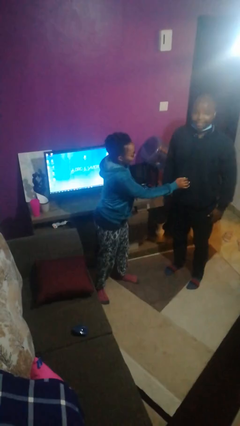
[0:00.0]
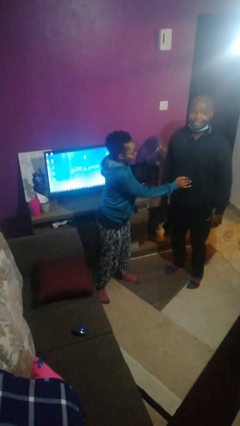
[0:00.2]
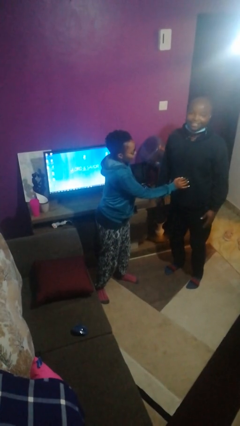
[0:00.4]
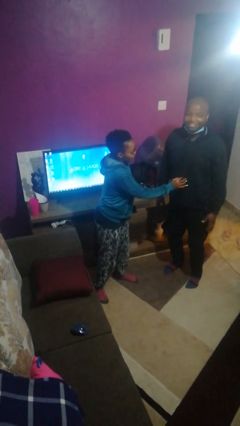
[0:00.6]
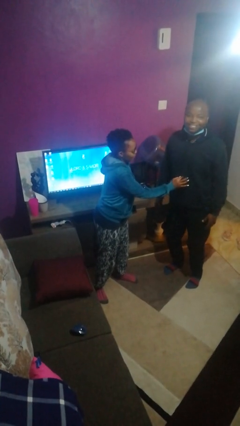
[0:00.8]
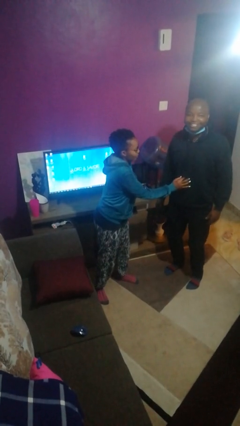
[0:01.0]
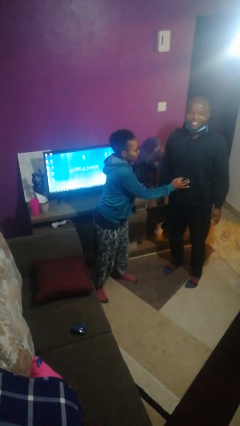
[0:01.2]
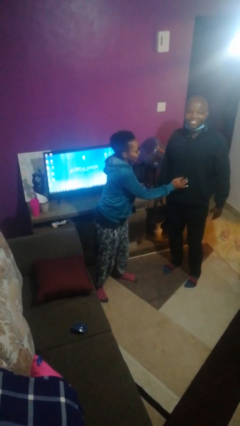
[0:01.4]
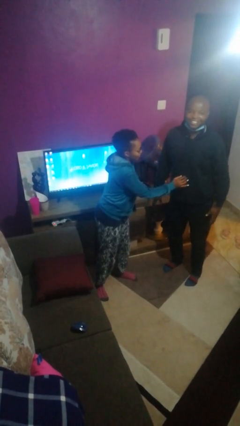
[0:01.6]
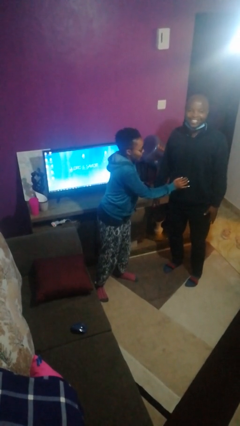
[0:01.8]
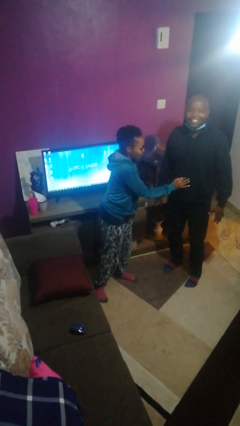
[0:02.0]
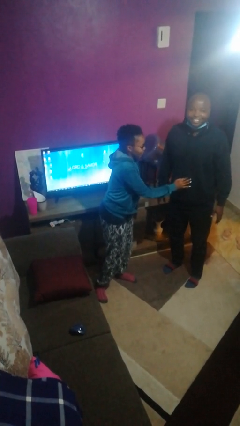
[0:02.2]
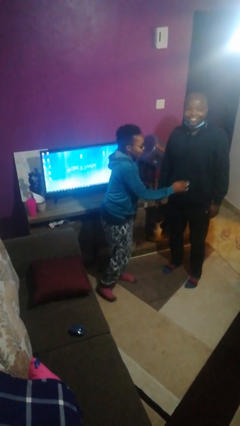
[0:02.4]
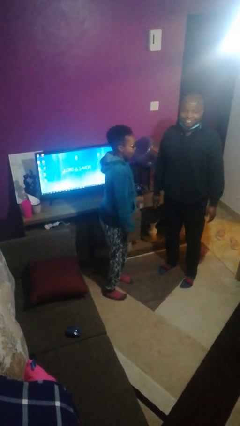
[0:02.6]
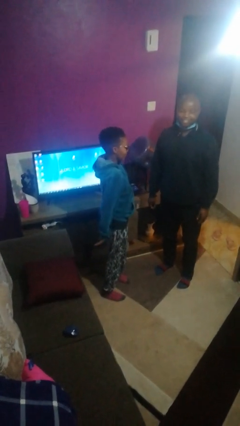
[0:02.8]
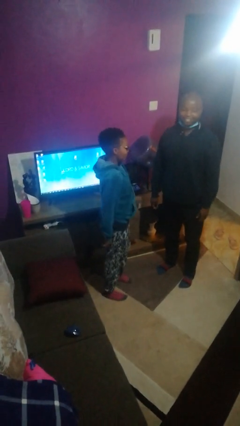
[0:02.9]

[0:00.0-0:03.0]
person tickles person

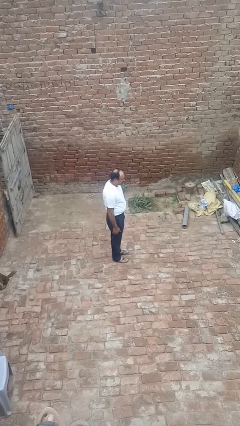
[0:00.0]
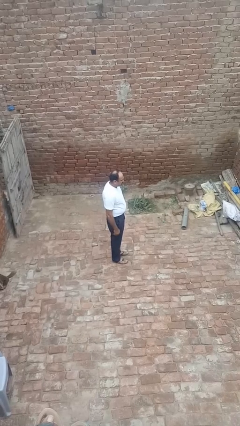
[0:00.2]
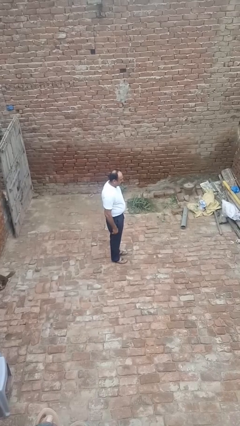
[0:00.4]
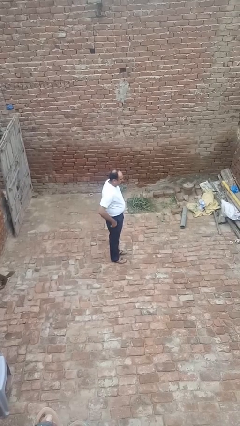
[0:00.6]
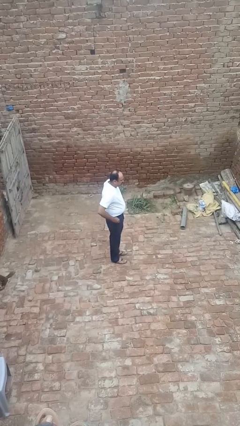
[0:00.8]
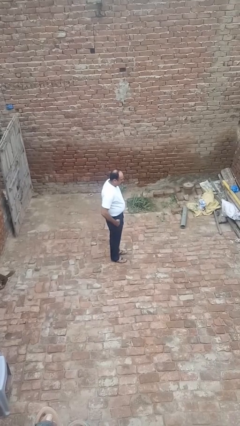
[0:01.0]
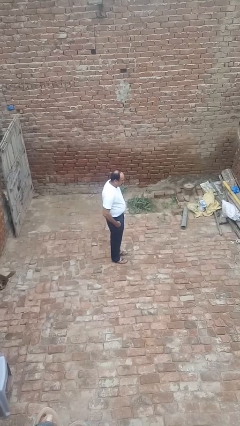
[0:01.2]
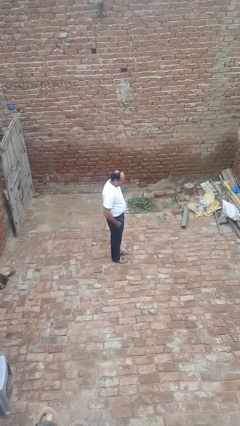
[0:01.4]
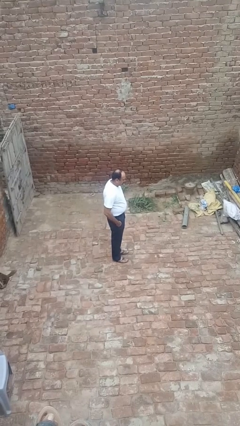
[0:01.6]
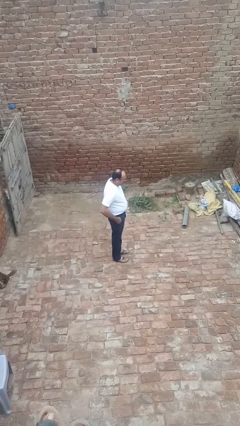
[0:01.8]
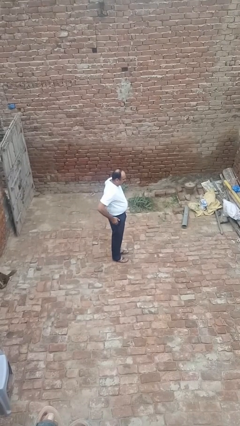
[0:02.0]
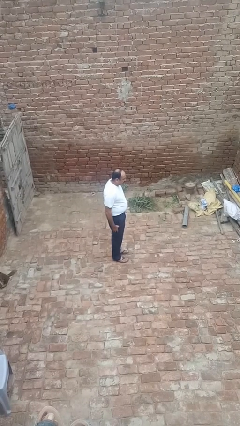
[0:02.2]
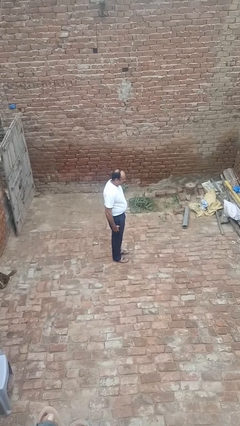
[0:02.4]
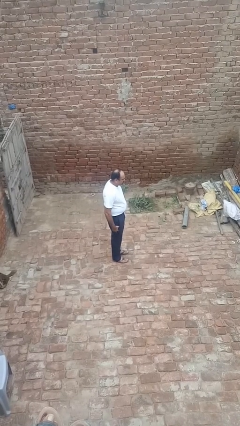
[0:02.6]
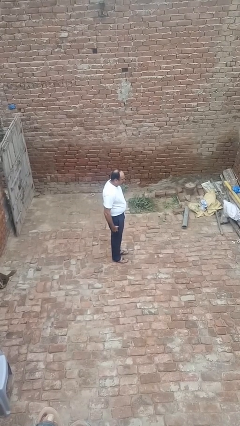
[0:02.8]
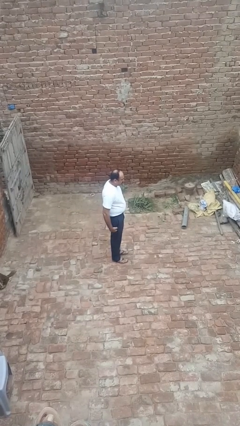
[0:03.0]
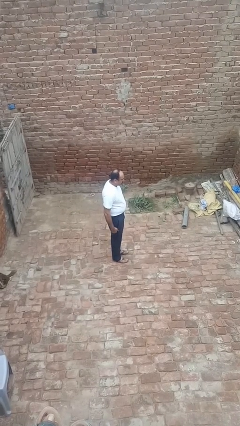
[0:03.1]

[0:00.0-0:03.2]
person puts hands in back pockets

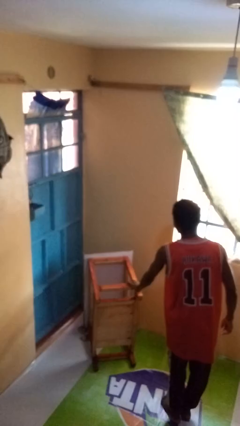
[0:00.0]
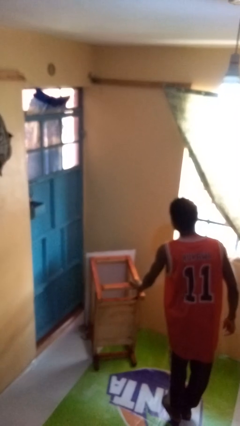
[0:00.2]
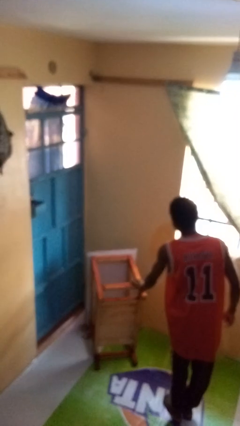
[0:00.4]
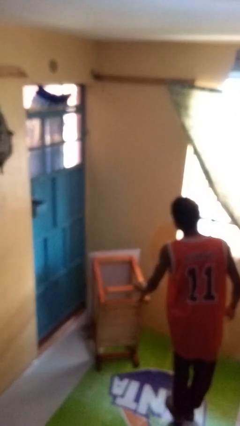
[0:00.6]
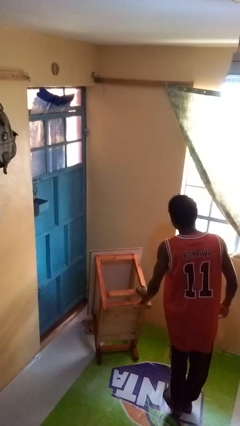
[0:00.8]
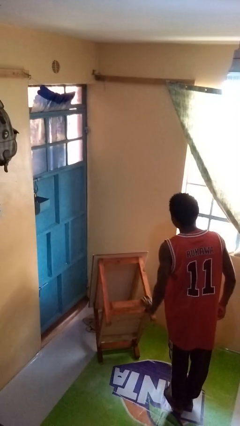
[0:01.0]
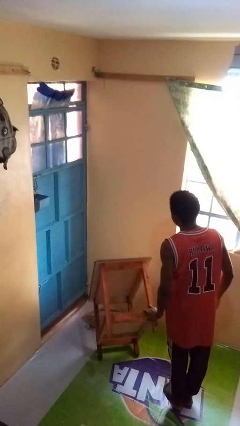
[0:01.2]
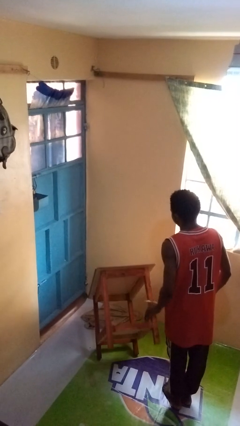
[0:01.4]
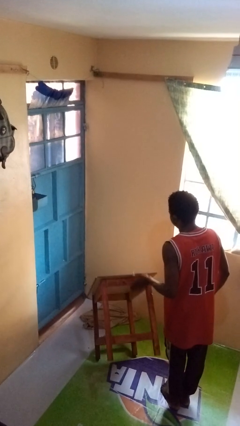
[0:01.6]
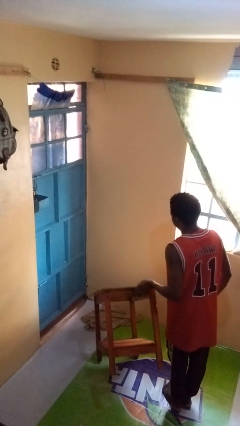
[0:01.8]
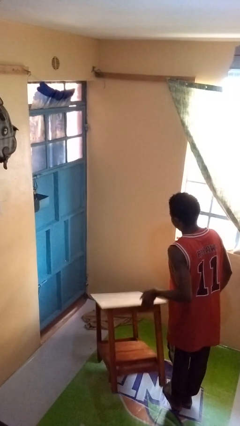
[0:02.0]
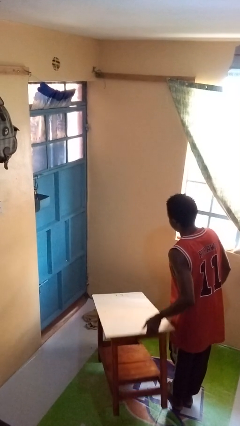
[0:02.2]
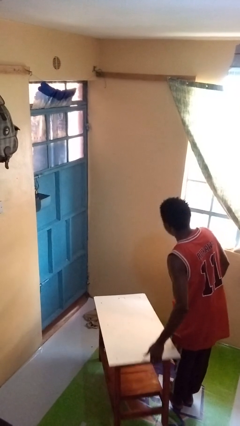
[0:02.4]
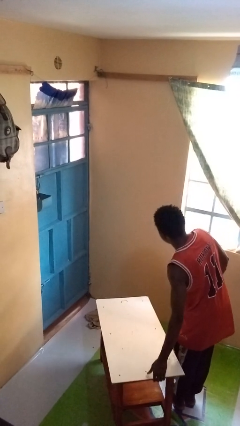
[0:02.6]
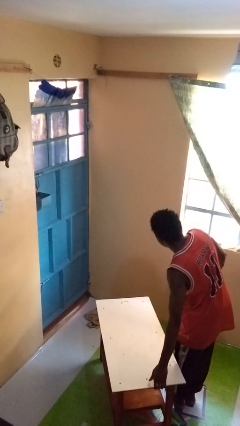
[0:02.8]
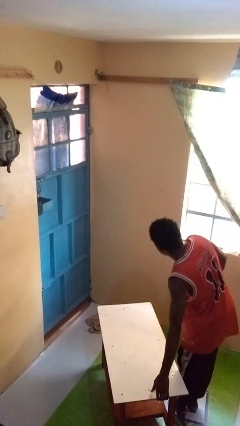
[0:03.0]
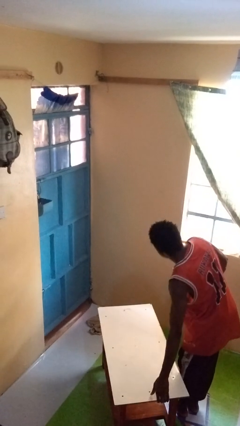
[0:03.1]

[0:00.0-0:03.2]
person sets upright furniture

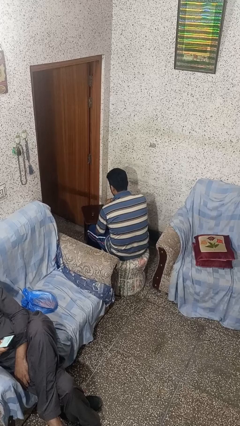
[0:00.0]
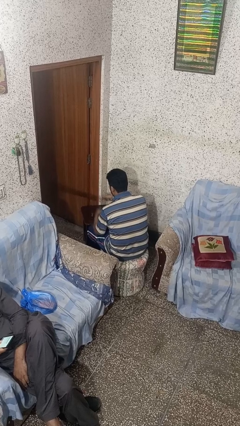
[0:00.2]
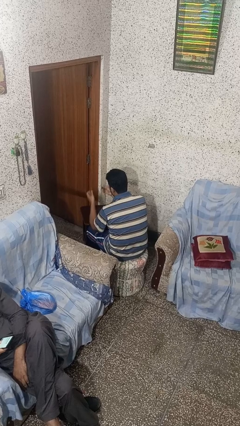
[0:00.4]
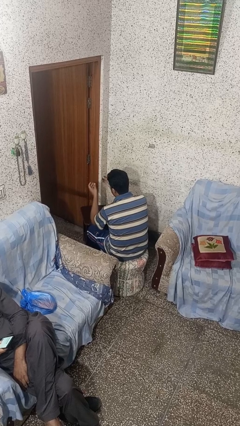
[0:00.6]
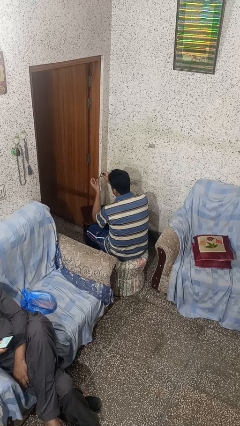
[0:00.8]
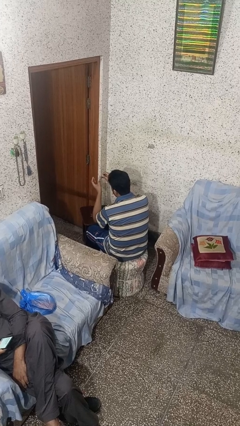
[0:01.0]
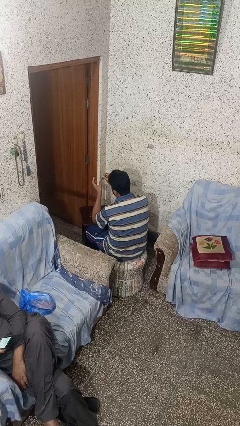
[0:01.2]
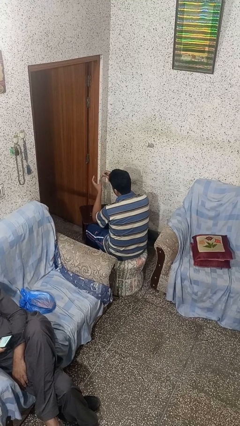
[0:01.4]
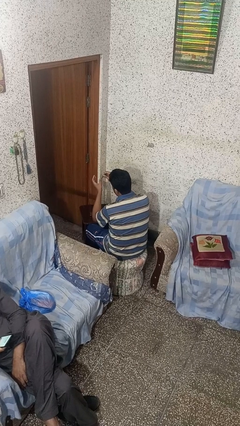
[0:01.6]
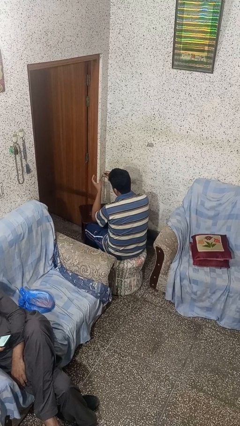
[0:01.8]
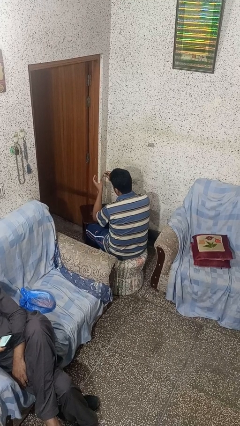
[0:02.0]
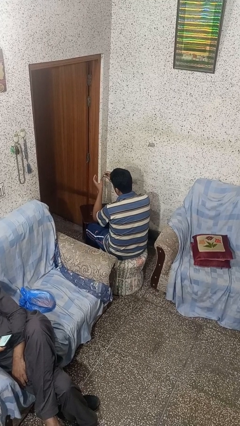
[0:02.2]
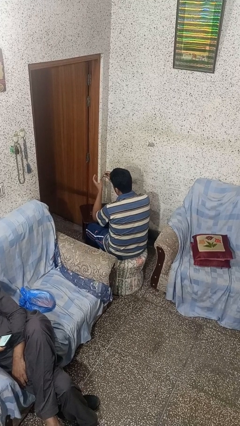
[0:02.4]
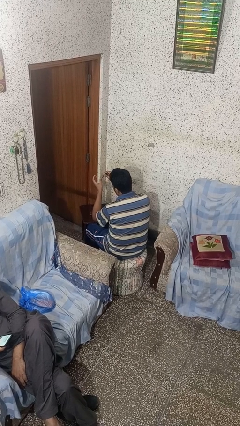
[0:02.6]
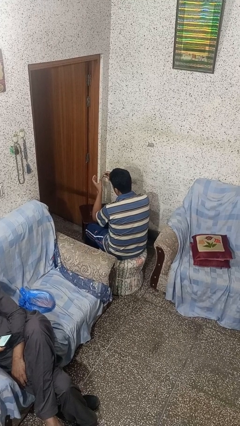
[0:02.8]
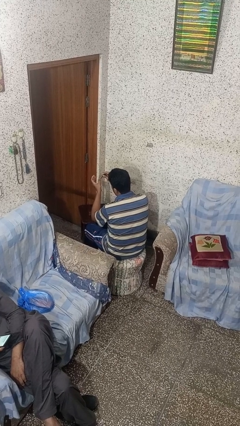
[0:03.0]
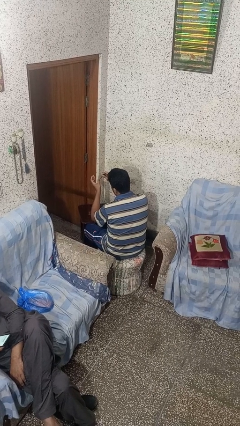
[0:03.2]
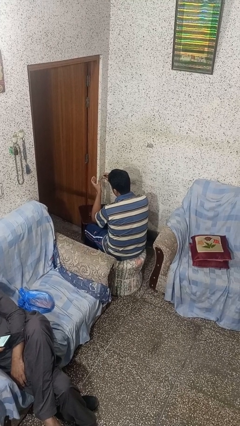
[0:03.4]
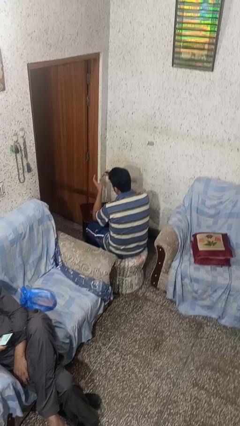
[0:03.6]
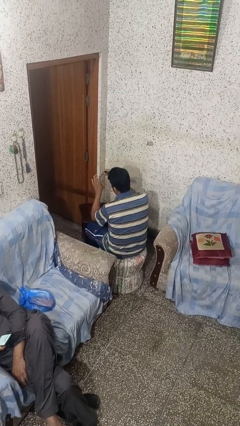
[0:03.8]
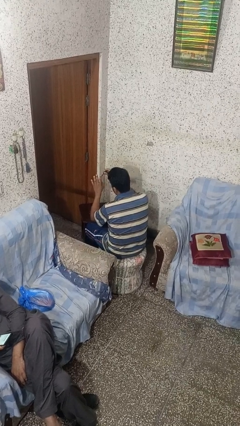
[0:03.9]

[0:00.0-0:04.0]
person paints fingernails

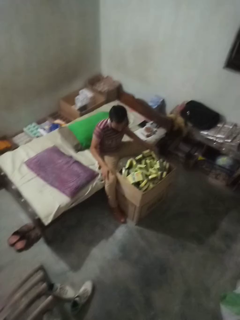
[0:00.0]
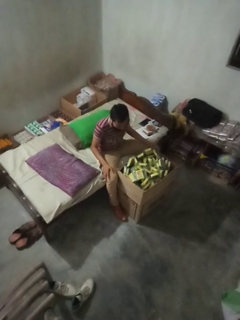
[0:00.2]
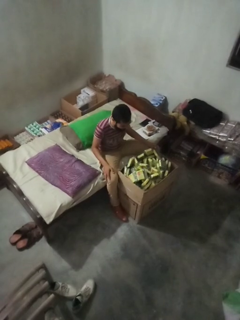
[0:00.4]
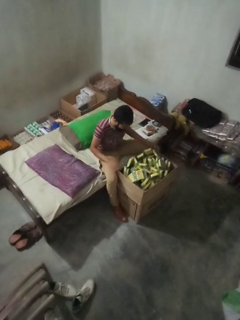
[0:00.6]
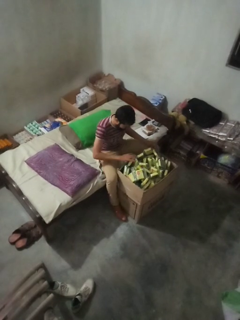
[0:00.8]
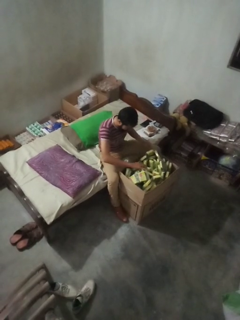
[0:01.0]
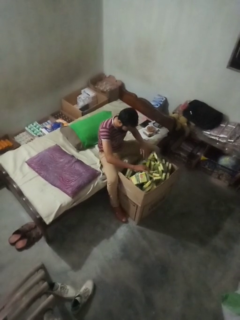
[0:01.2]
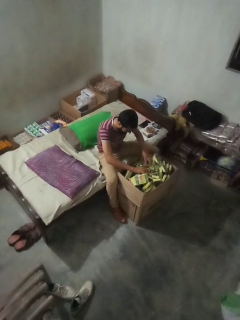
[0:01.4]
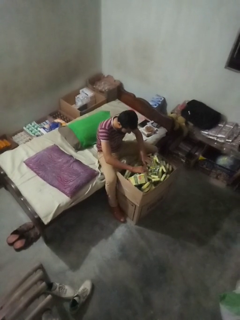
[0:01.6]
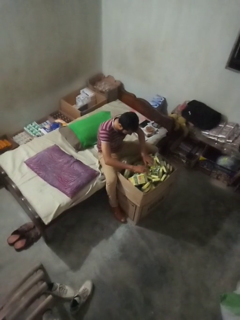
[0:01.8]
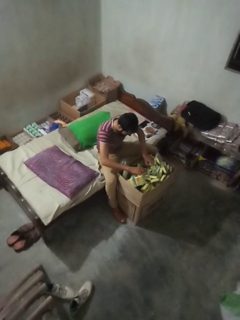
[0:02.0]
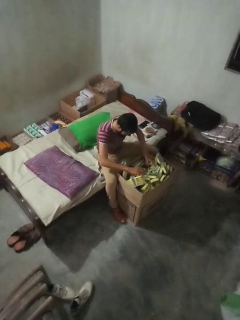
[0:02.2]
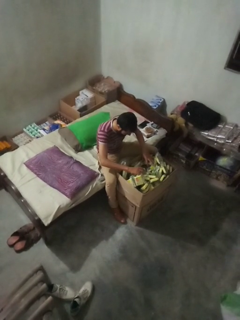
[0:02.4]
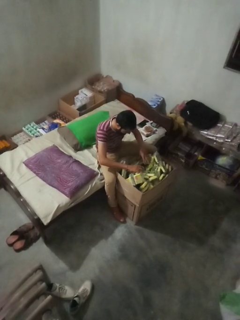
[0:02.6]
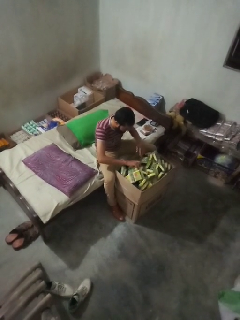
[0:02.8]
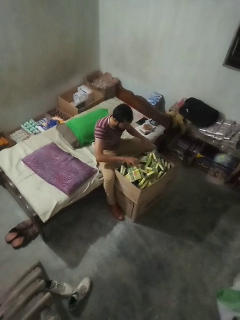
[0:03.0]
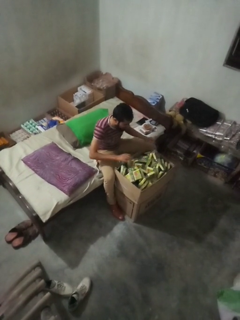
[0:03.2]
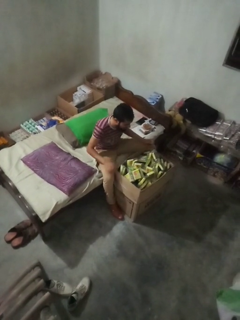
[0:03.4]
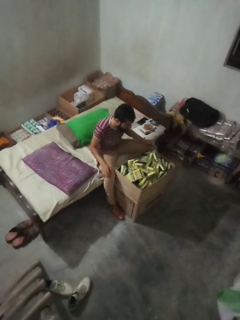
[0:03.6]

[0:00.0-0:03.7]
person searches in box

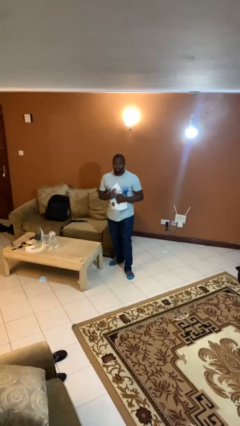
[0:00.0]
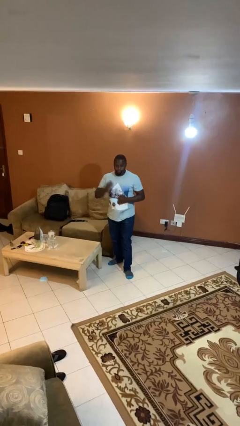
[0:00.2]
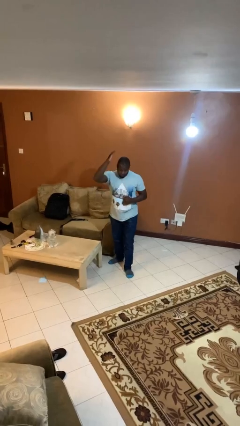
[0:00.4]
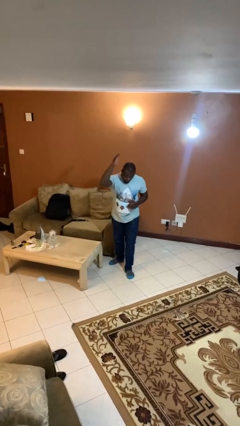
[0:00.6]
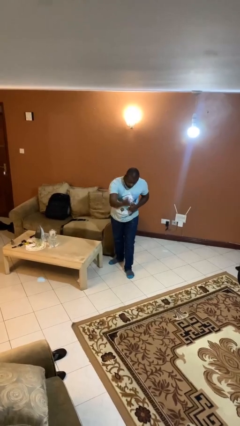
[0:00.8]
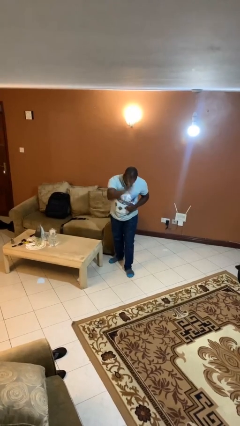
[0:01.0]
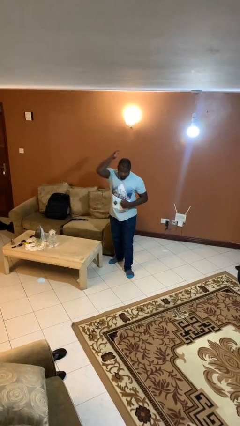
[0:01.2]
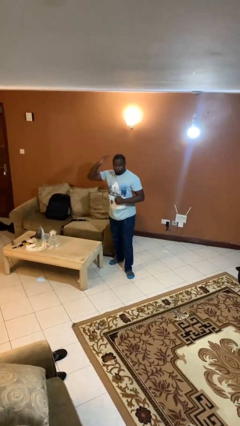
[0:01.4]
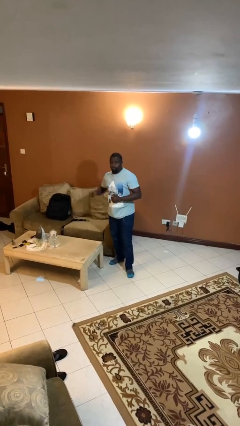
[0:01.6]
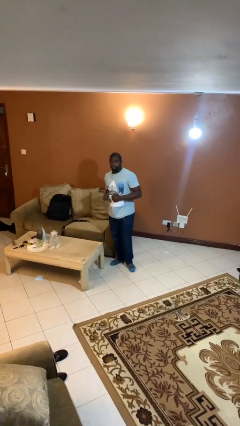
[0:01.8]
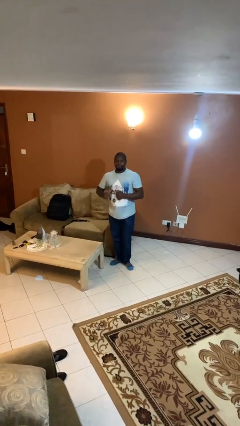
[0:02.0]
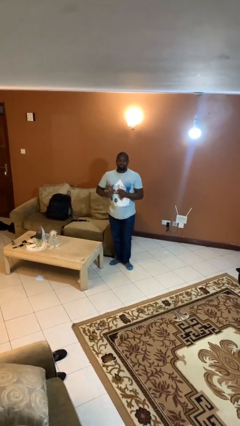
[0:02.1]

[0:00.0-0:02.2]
person karate chop
